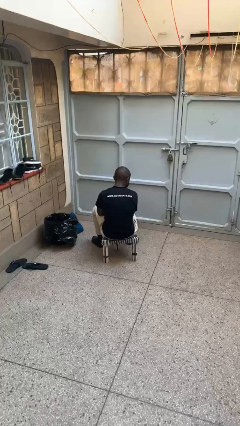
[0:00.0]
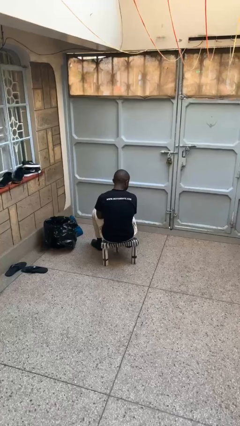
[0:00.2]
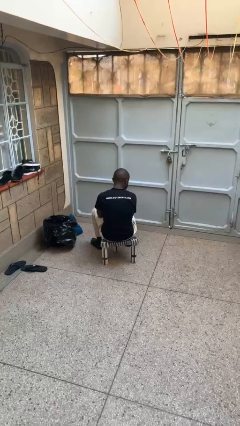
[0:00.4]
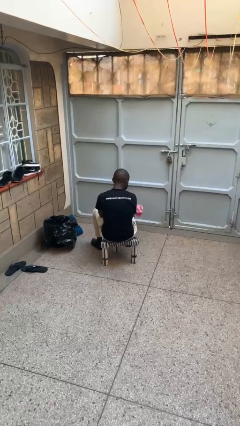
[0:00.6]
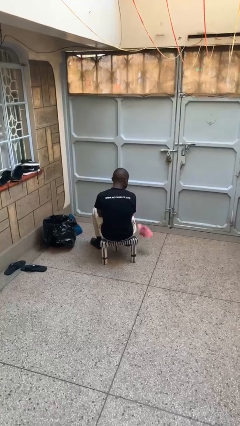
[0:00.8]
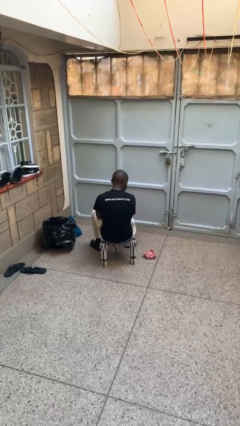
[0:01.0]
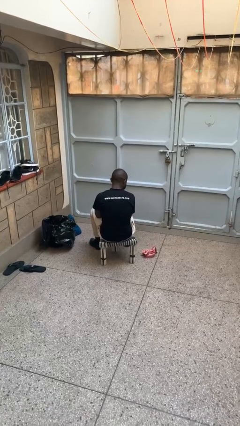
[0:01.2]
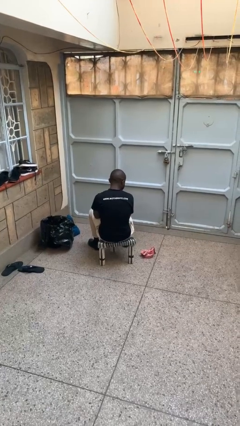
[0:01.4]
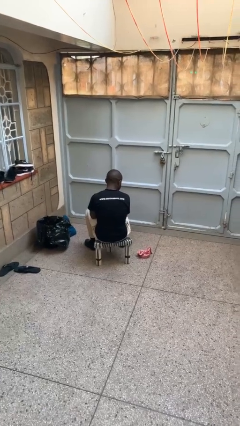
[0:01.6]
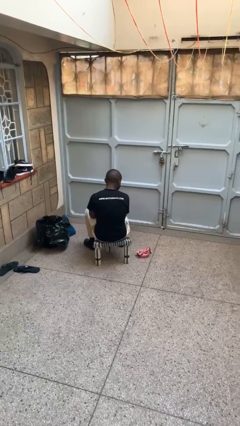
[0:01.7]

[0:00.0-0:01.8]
person throws object on table

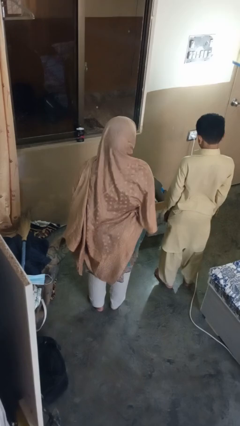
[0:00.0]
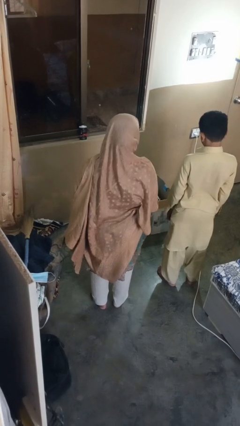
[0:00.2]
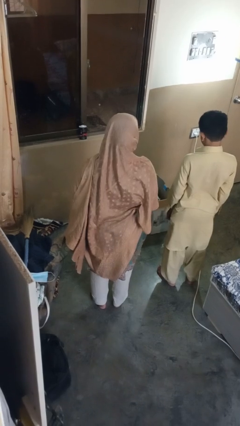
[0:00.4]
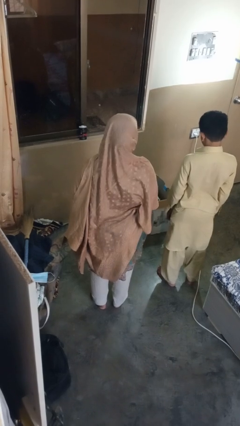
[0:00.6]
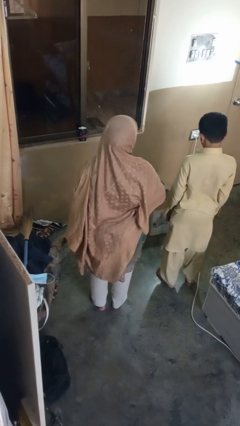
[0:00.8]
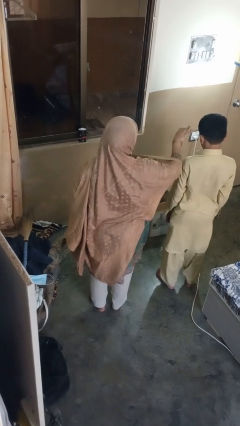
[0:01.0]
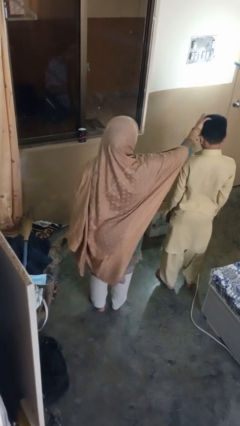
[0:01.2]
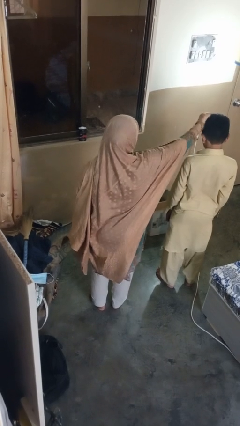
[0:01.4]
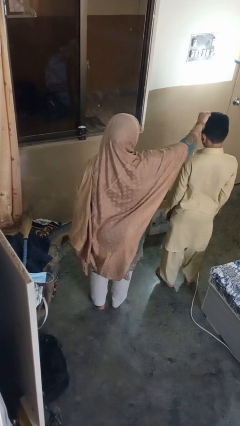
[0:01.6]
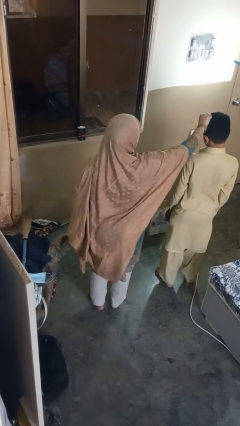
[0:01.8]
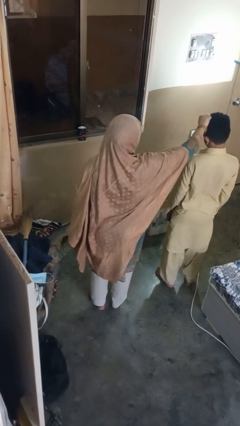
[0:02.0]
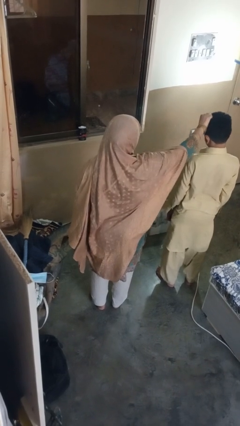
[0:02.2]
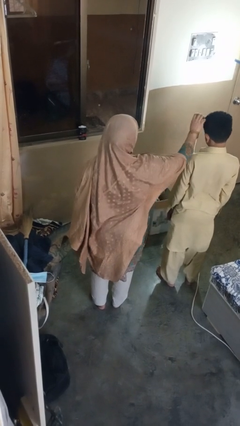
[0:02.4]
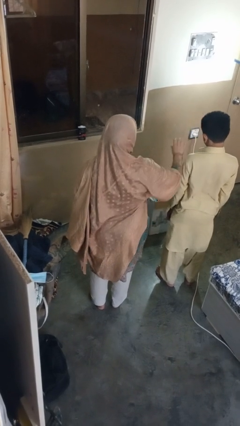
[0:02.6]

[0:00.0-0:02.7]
person grabs person by hair

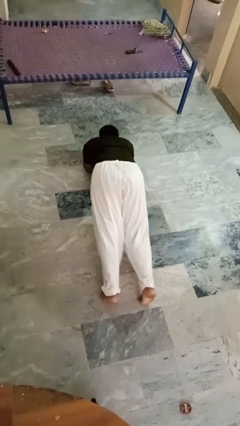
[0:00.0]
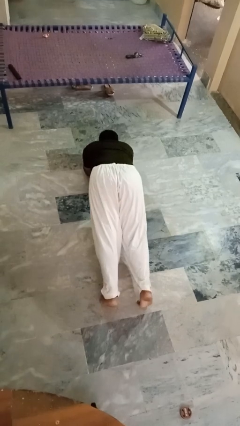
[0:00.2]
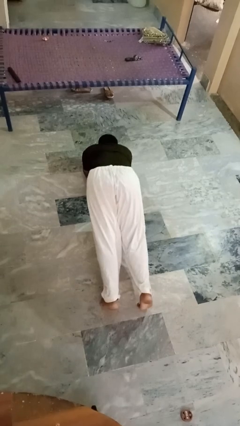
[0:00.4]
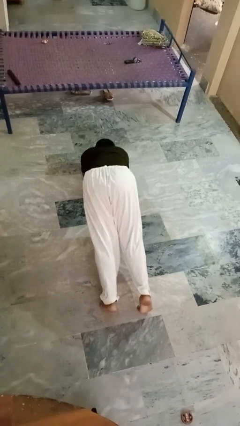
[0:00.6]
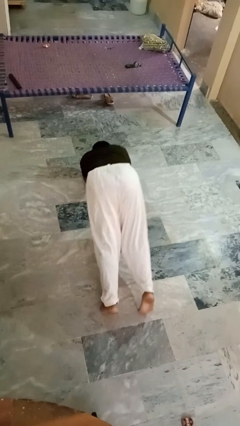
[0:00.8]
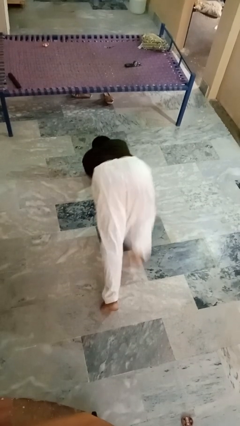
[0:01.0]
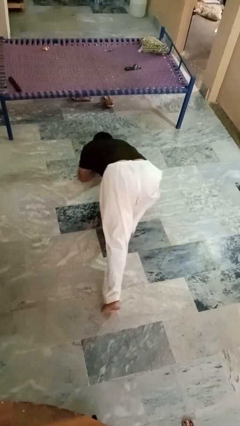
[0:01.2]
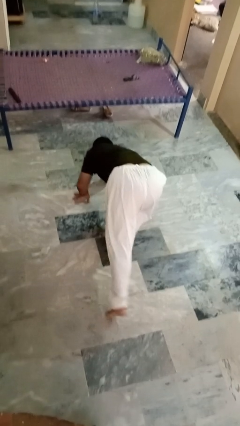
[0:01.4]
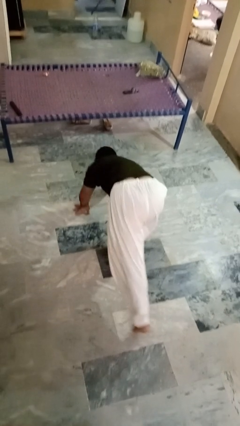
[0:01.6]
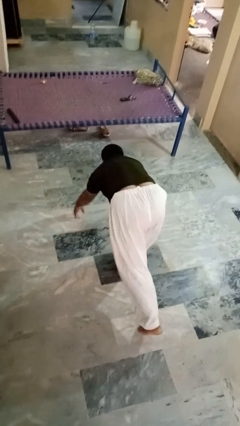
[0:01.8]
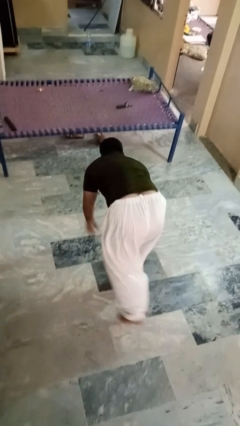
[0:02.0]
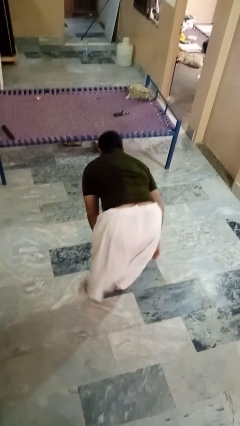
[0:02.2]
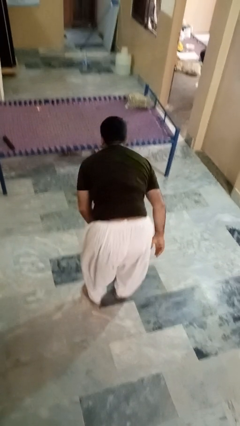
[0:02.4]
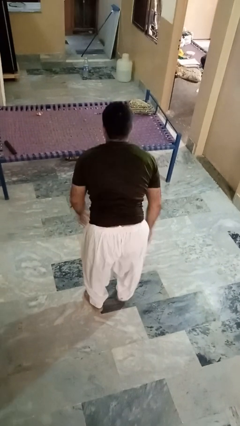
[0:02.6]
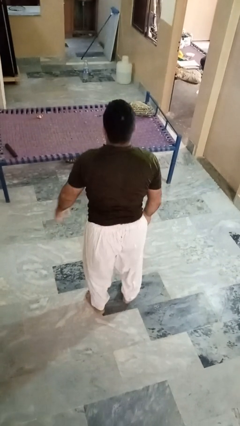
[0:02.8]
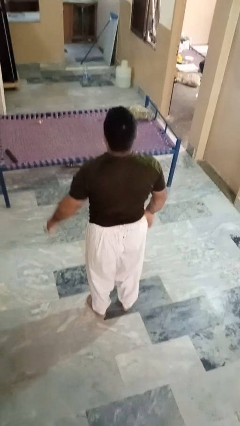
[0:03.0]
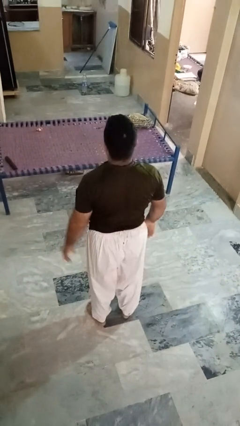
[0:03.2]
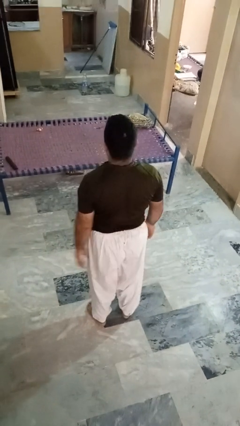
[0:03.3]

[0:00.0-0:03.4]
person stands up from floor

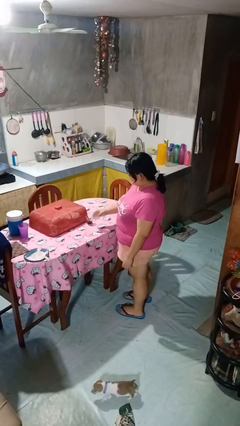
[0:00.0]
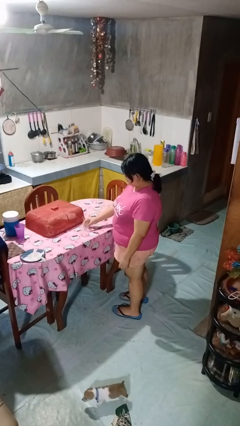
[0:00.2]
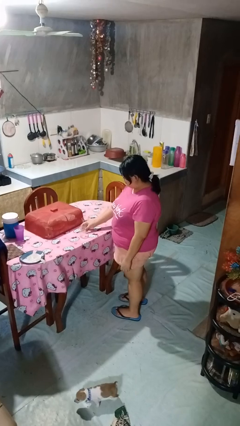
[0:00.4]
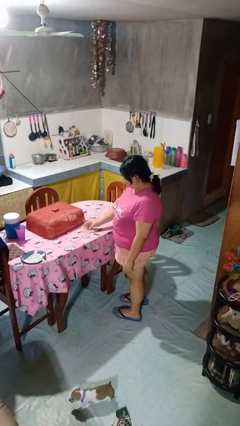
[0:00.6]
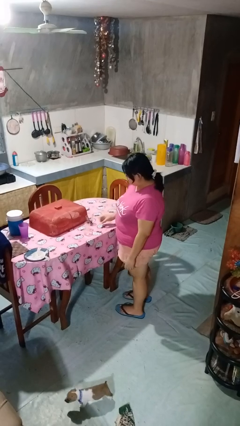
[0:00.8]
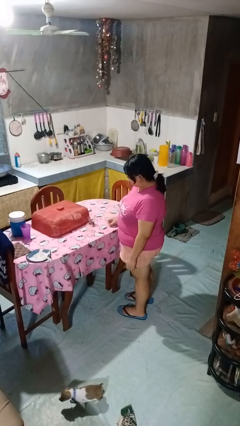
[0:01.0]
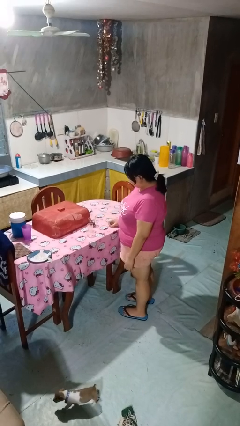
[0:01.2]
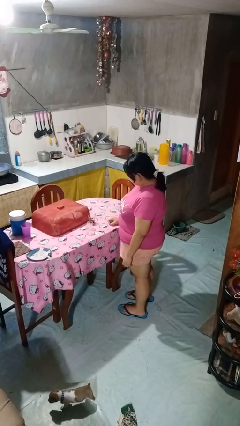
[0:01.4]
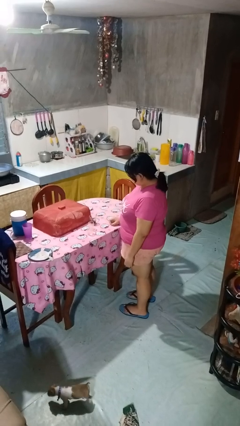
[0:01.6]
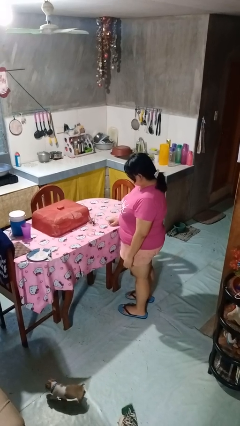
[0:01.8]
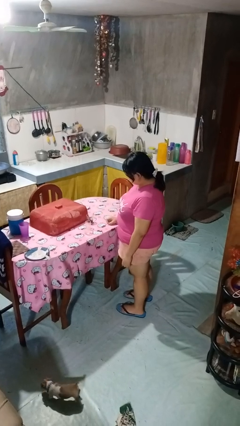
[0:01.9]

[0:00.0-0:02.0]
person puts down object on table

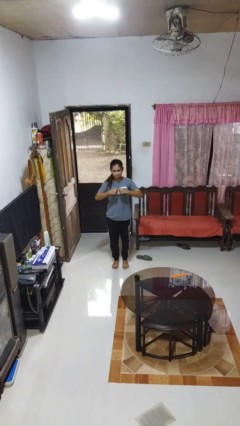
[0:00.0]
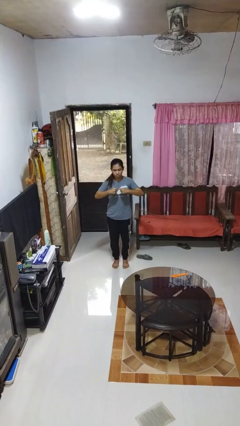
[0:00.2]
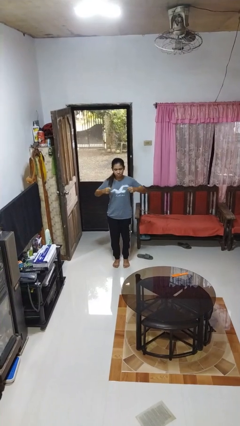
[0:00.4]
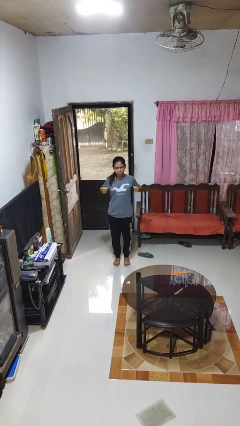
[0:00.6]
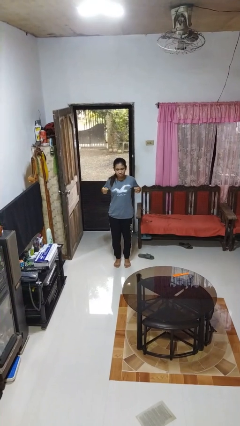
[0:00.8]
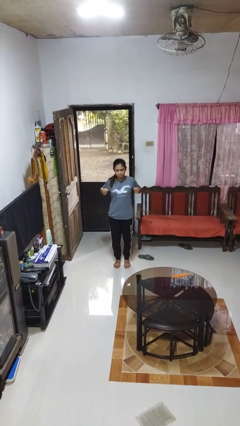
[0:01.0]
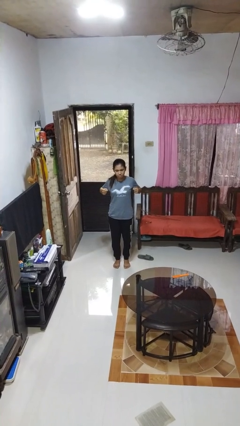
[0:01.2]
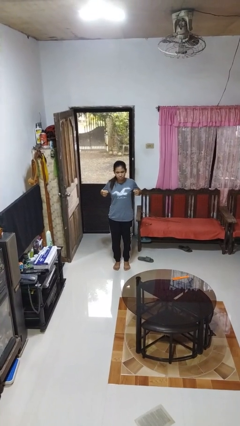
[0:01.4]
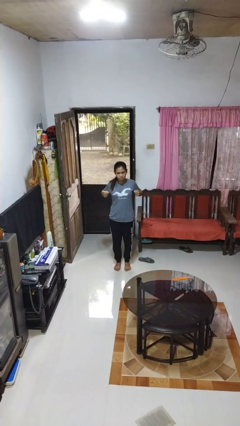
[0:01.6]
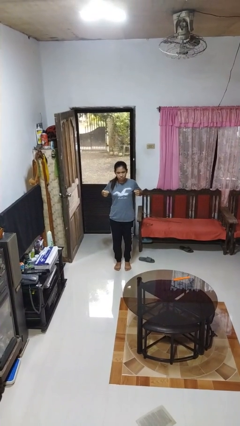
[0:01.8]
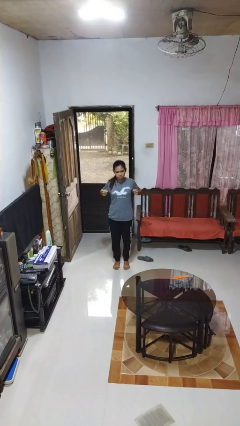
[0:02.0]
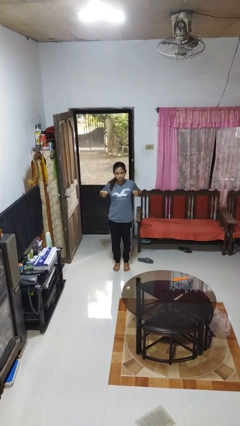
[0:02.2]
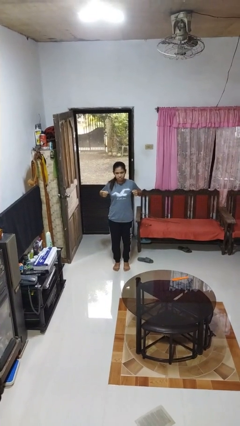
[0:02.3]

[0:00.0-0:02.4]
person gestures zoom in

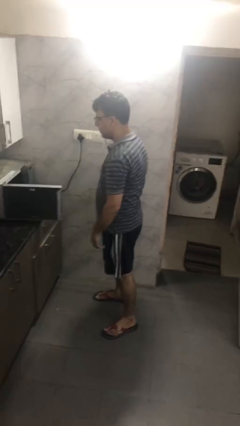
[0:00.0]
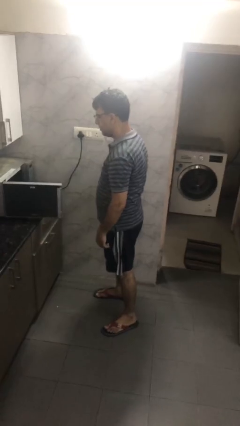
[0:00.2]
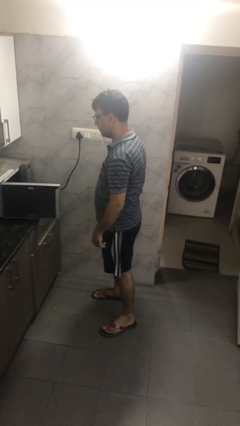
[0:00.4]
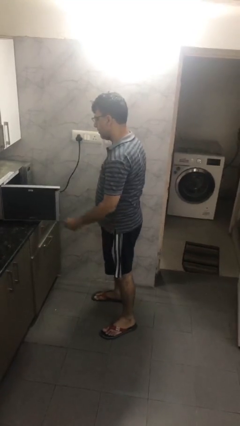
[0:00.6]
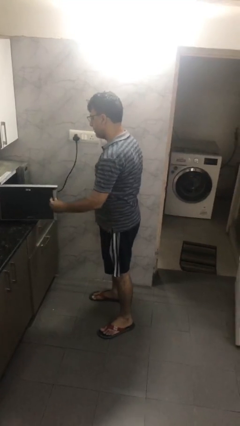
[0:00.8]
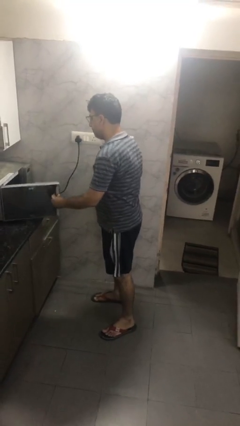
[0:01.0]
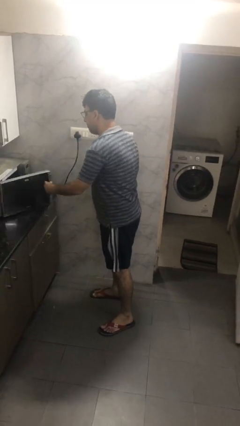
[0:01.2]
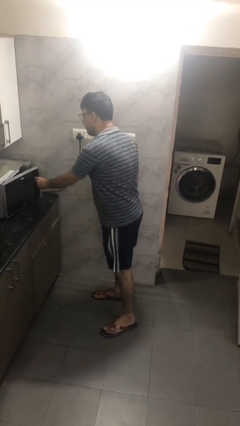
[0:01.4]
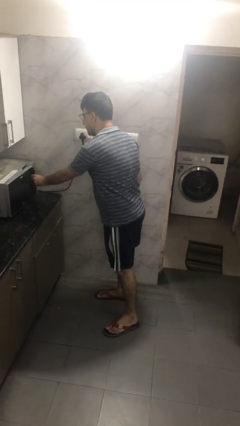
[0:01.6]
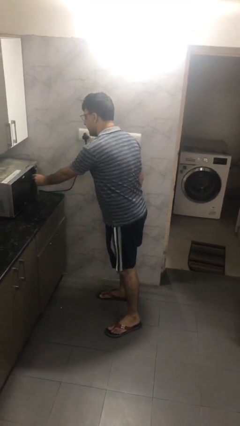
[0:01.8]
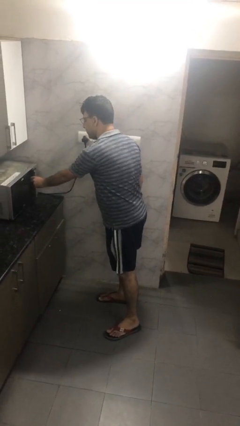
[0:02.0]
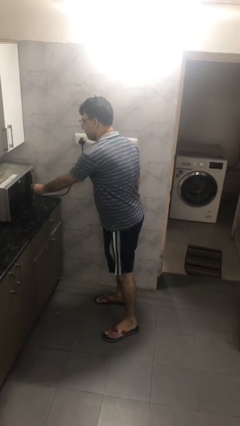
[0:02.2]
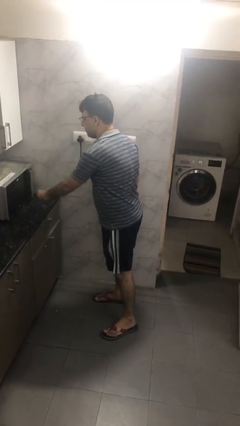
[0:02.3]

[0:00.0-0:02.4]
person closes microwave

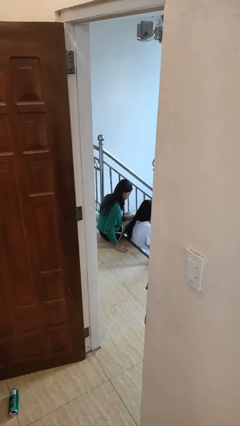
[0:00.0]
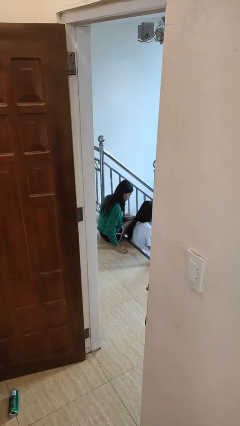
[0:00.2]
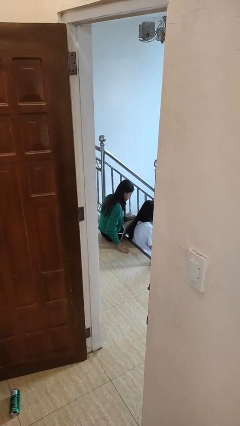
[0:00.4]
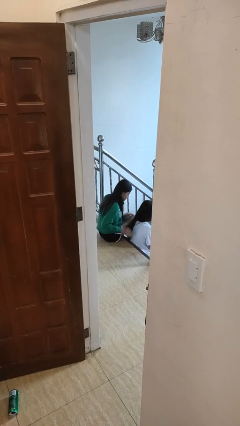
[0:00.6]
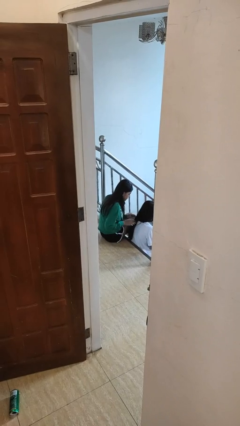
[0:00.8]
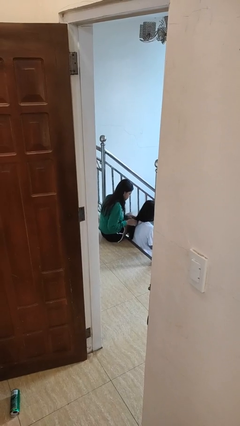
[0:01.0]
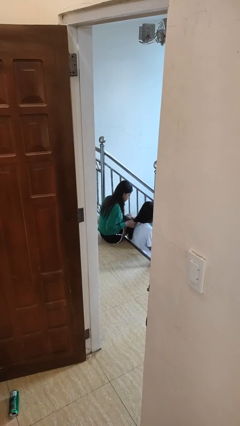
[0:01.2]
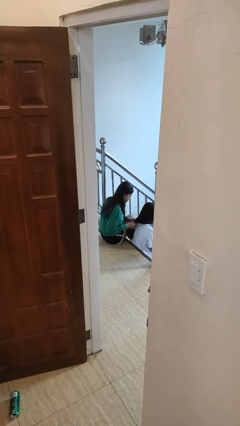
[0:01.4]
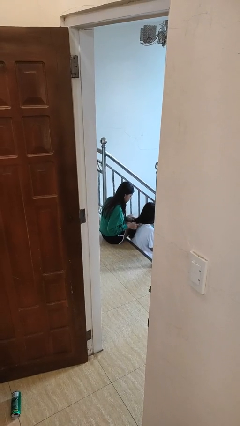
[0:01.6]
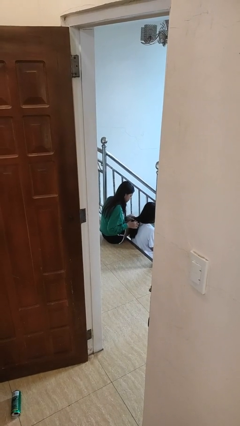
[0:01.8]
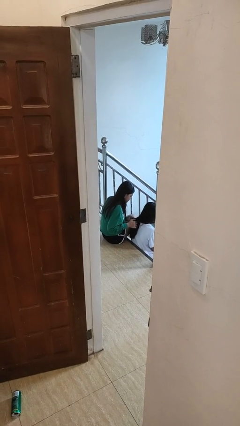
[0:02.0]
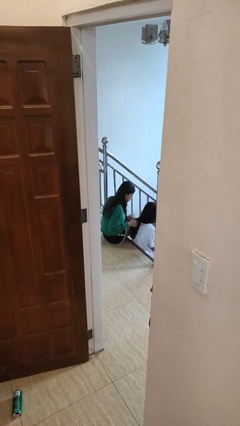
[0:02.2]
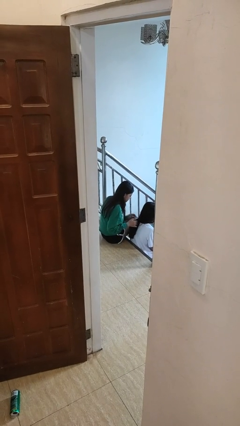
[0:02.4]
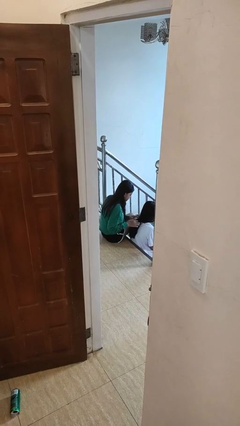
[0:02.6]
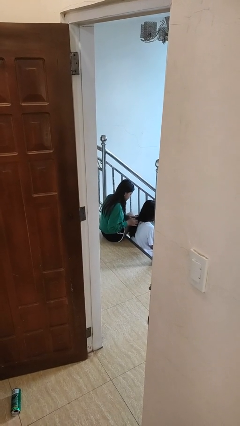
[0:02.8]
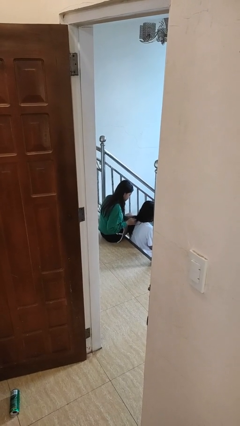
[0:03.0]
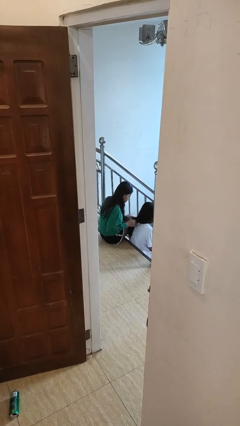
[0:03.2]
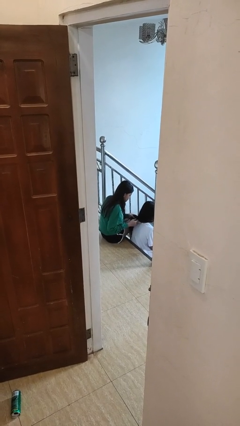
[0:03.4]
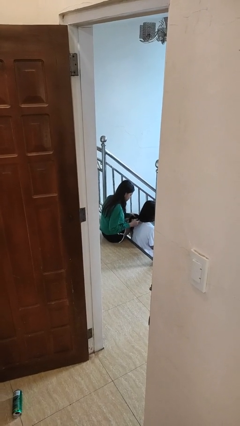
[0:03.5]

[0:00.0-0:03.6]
person braids hair of person
